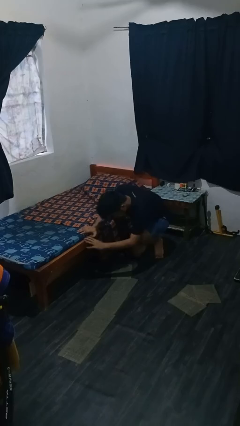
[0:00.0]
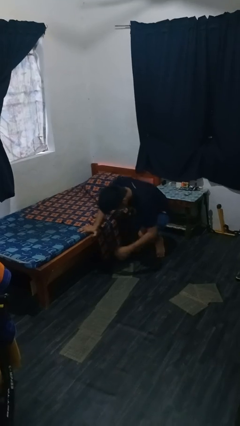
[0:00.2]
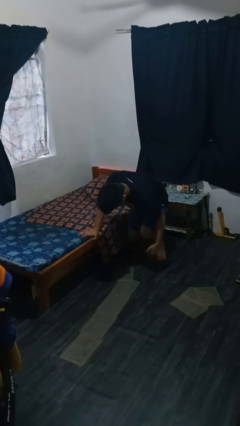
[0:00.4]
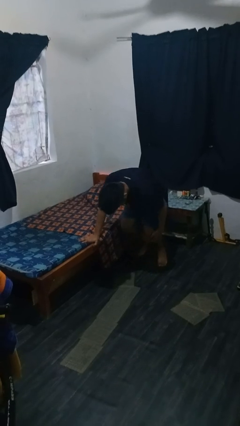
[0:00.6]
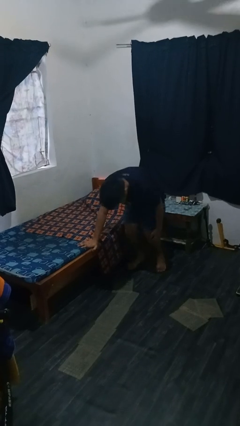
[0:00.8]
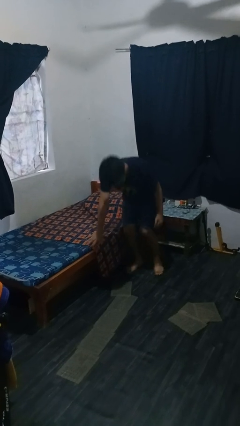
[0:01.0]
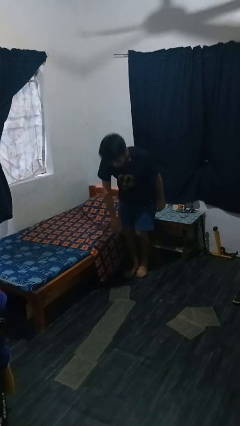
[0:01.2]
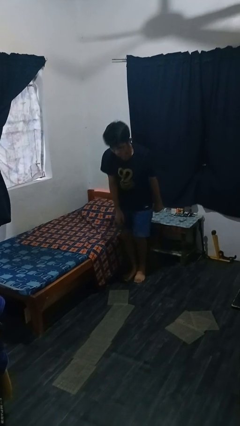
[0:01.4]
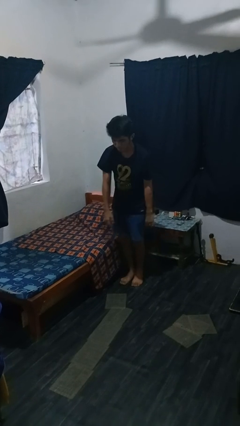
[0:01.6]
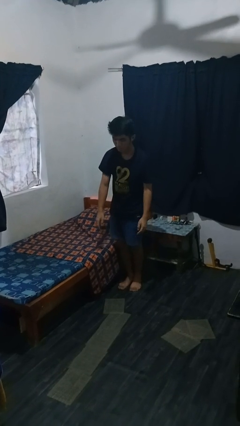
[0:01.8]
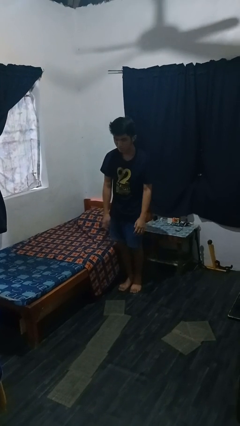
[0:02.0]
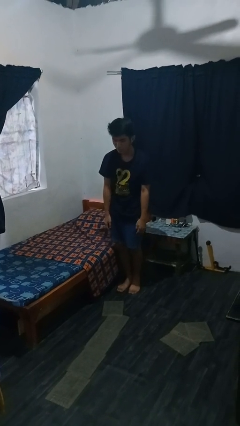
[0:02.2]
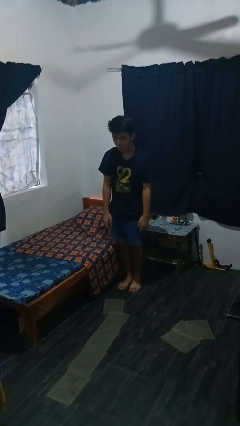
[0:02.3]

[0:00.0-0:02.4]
person stands up from floor

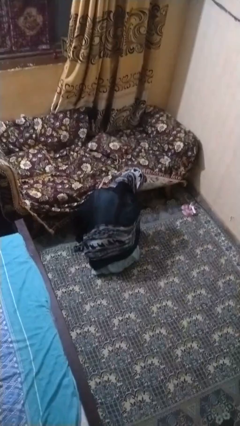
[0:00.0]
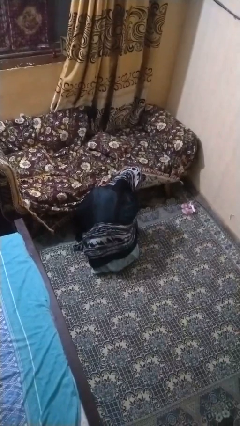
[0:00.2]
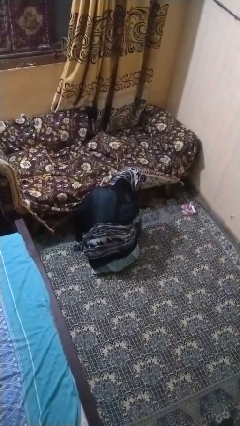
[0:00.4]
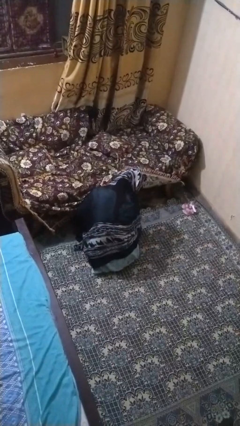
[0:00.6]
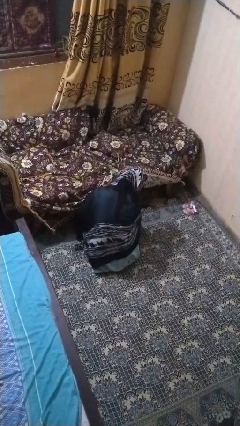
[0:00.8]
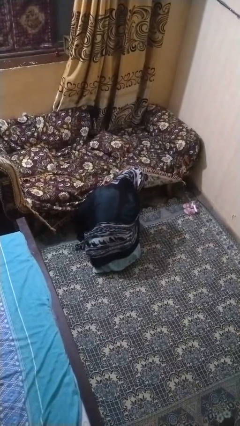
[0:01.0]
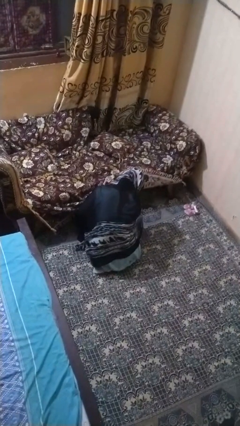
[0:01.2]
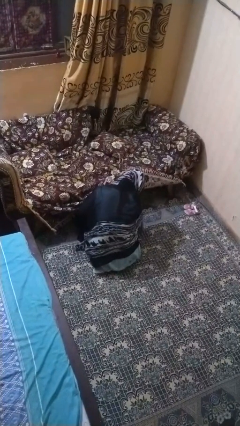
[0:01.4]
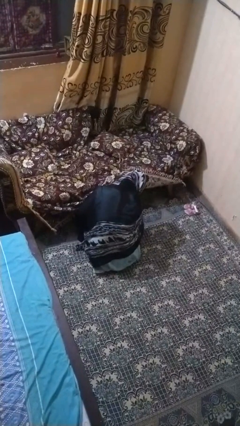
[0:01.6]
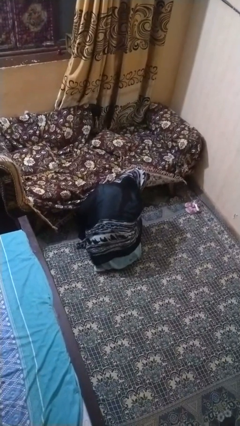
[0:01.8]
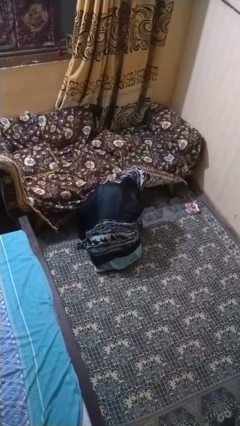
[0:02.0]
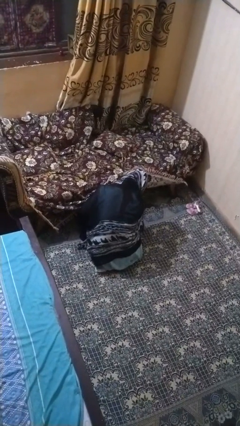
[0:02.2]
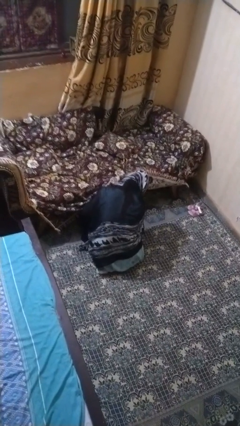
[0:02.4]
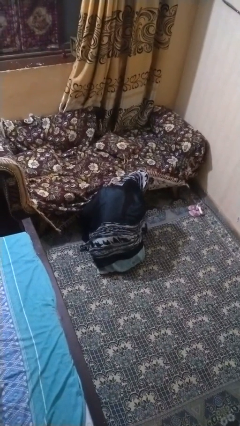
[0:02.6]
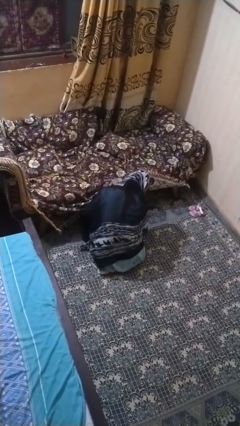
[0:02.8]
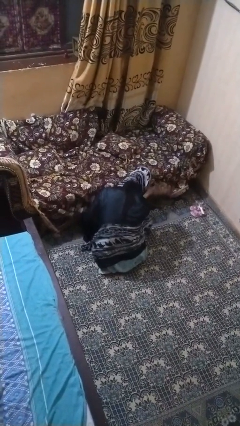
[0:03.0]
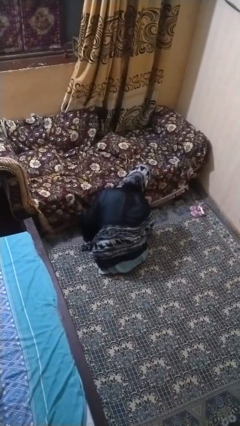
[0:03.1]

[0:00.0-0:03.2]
person searches under couch

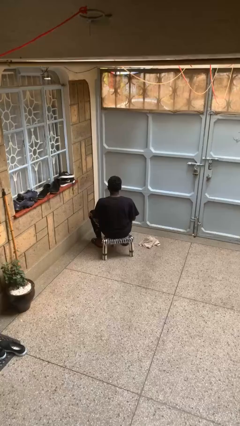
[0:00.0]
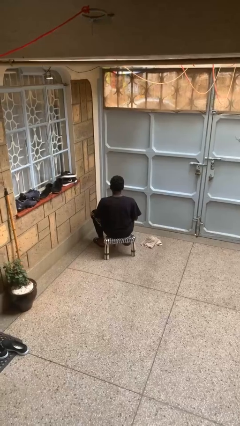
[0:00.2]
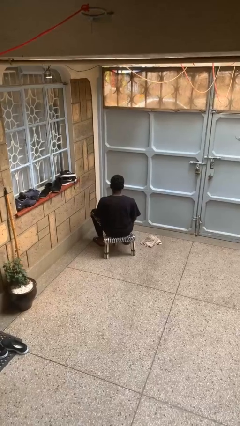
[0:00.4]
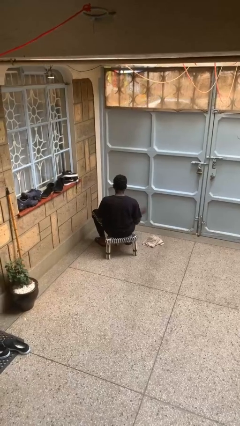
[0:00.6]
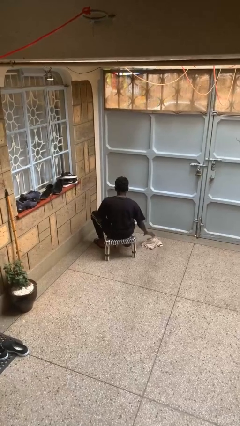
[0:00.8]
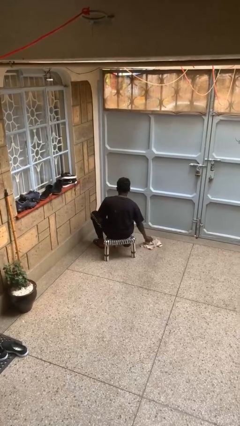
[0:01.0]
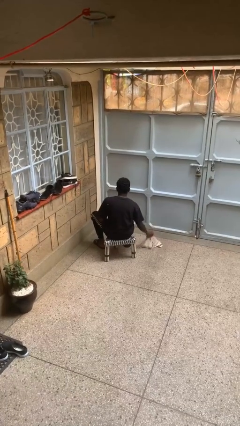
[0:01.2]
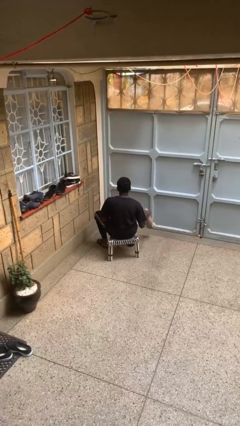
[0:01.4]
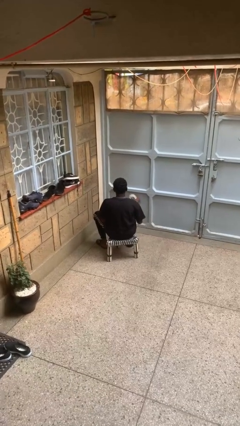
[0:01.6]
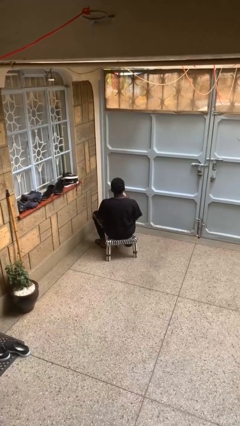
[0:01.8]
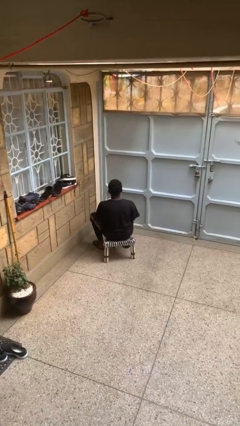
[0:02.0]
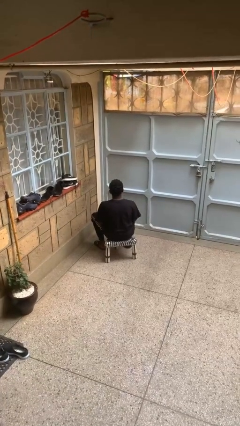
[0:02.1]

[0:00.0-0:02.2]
person picks up object from floor

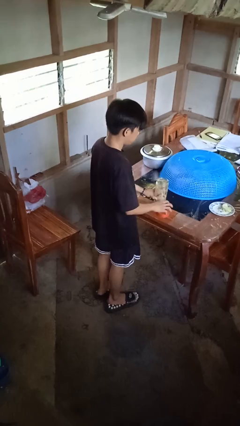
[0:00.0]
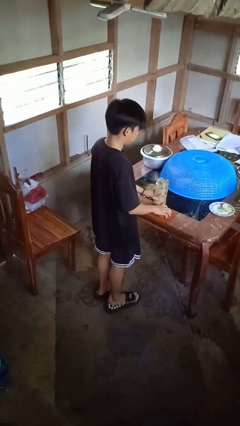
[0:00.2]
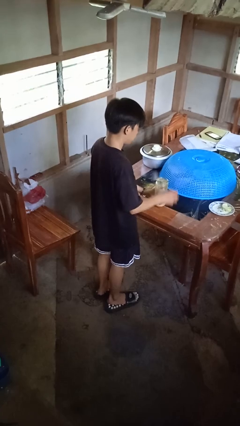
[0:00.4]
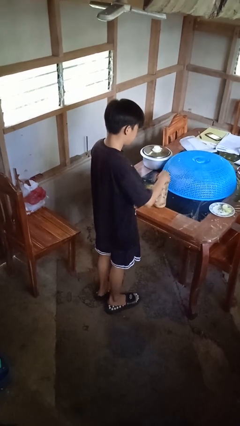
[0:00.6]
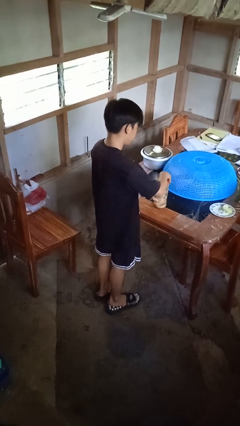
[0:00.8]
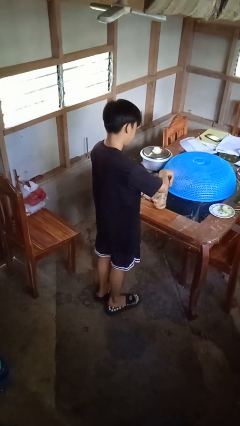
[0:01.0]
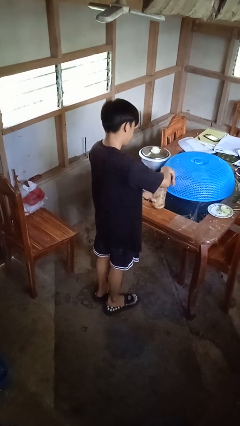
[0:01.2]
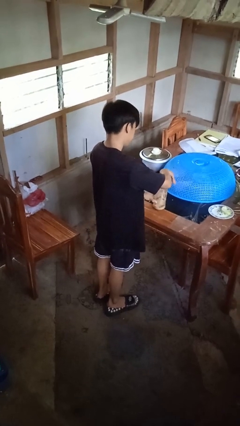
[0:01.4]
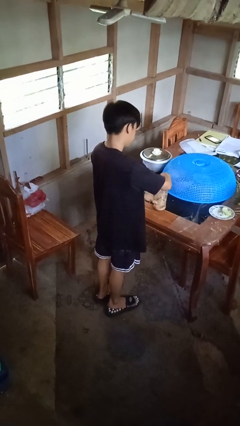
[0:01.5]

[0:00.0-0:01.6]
person closes jar

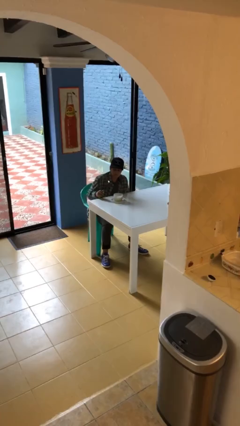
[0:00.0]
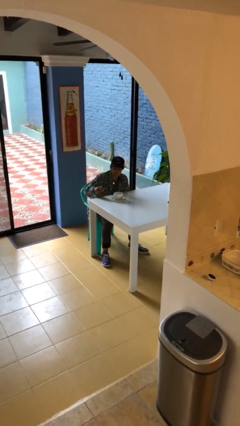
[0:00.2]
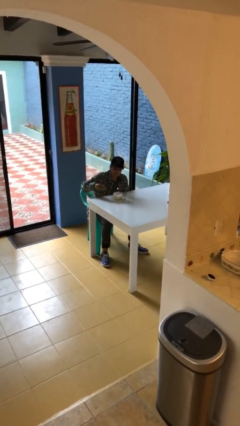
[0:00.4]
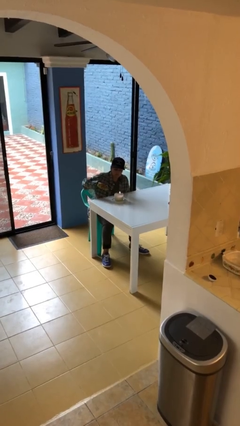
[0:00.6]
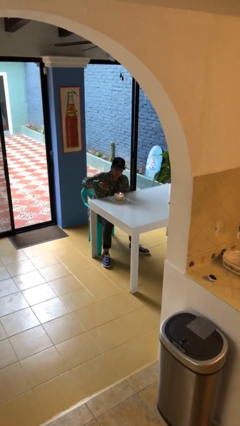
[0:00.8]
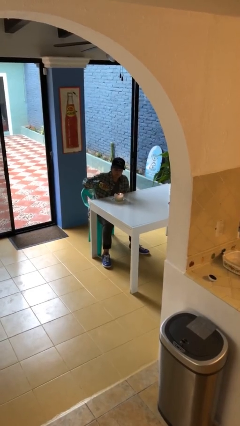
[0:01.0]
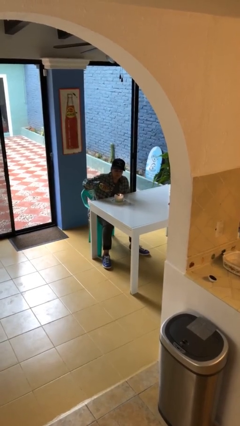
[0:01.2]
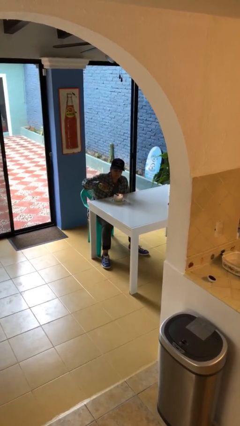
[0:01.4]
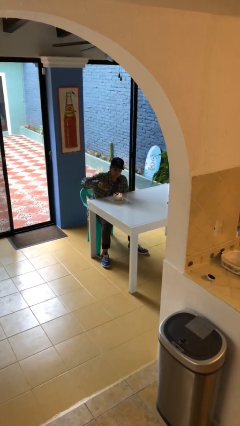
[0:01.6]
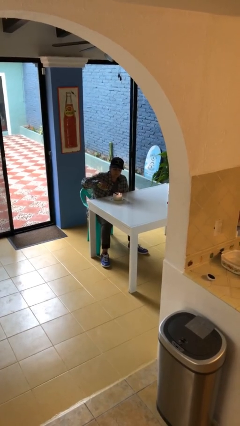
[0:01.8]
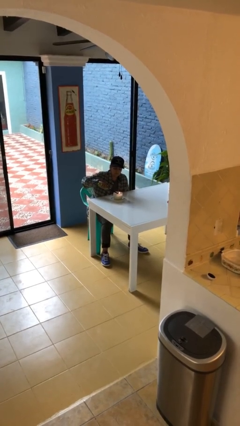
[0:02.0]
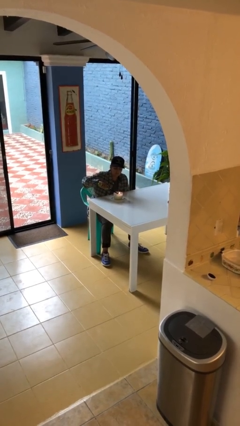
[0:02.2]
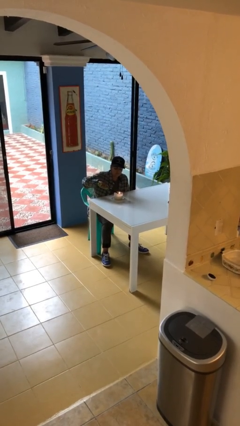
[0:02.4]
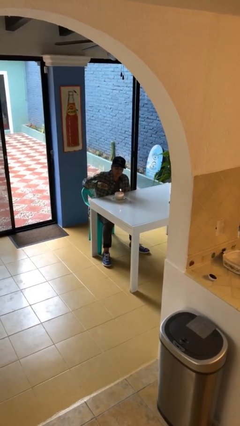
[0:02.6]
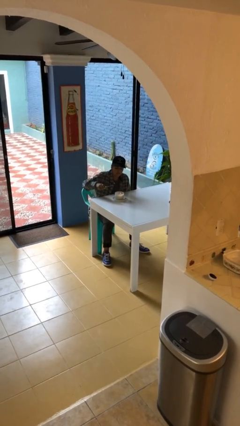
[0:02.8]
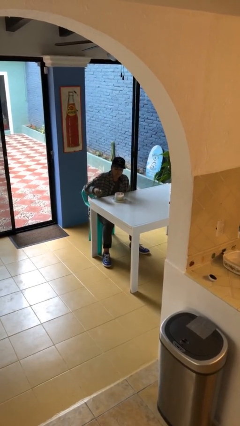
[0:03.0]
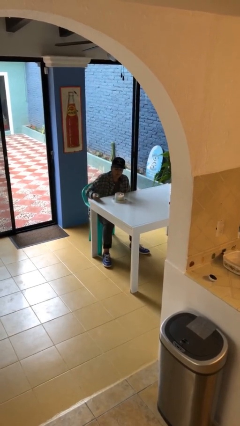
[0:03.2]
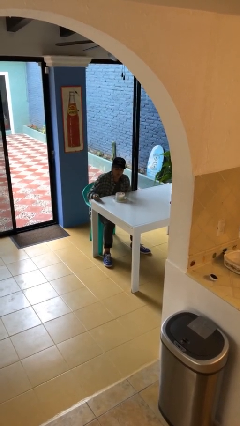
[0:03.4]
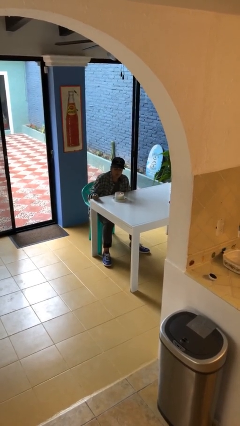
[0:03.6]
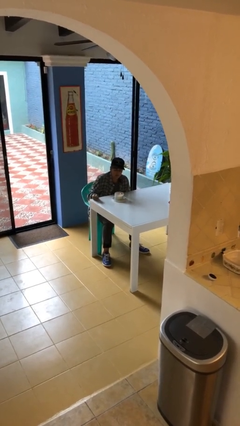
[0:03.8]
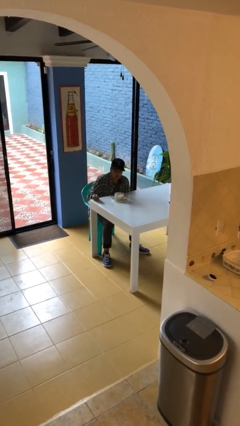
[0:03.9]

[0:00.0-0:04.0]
person lights candle

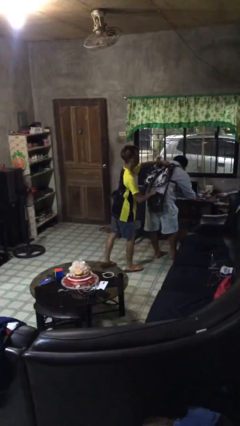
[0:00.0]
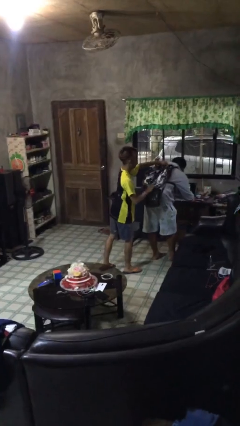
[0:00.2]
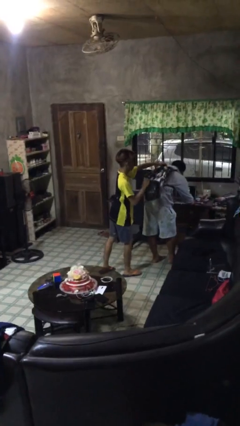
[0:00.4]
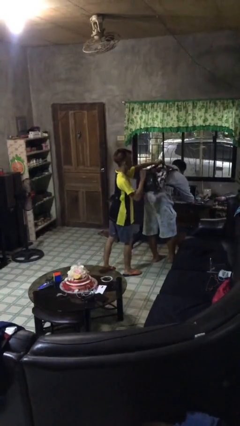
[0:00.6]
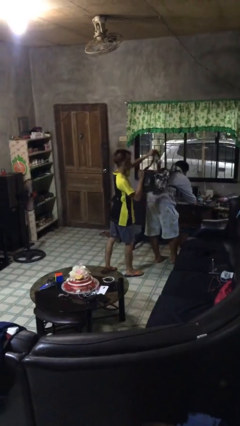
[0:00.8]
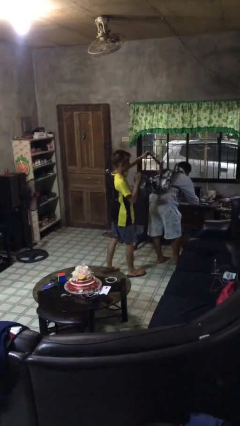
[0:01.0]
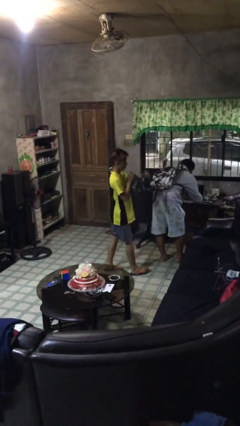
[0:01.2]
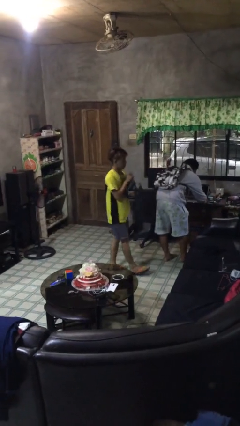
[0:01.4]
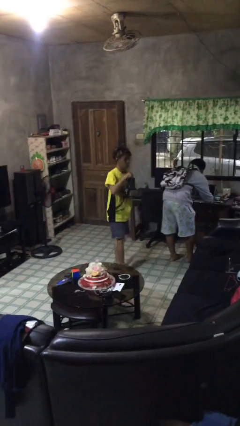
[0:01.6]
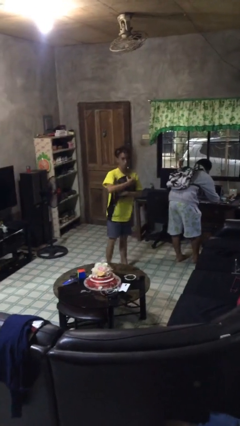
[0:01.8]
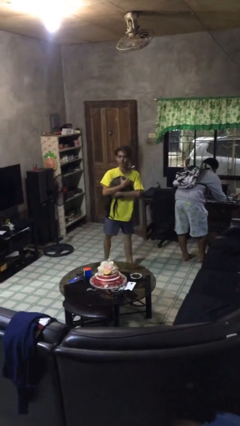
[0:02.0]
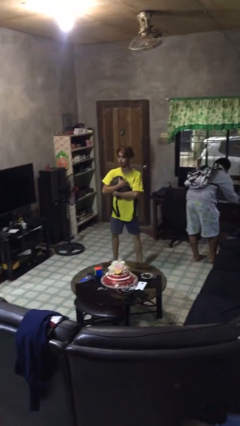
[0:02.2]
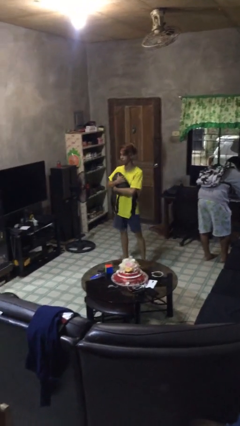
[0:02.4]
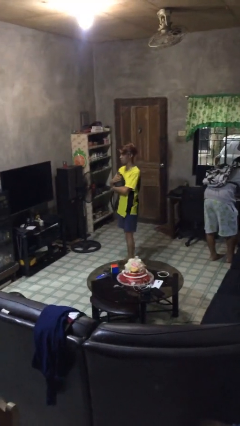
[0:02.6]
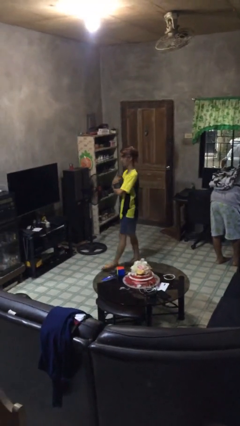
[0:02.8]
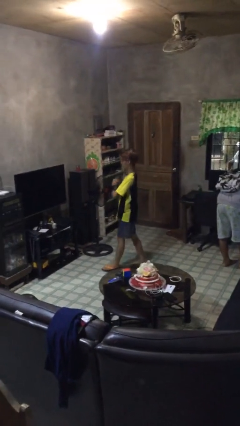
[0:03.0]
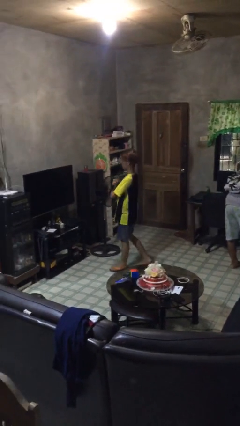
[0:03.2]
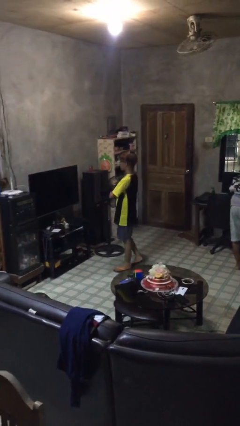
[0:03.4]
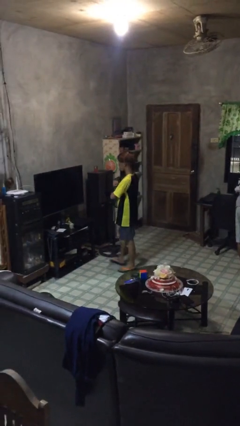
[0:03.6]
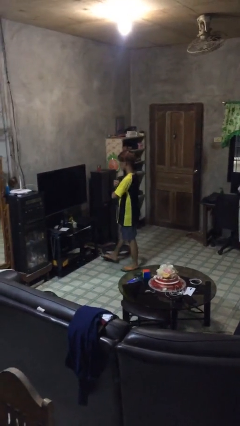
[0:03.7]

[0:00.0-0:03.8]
person steals object from person
